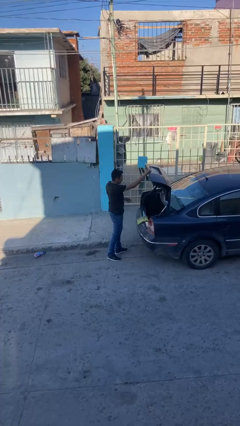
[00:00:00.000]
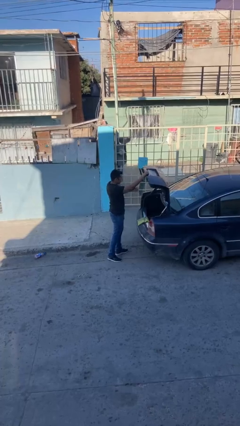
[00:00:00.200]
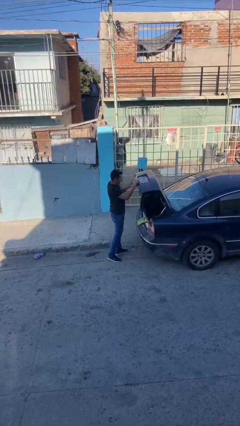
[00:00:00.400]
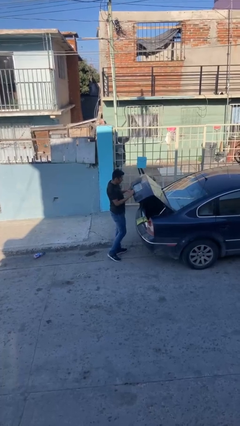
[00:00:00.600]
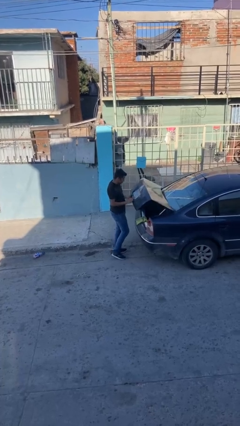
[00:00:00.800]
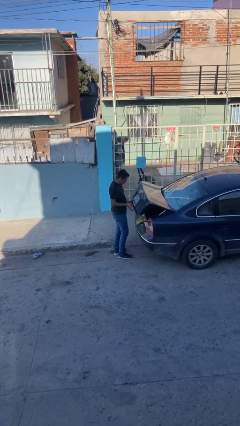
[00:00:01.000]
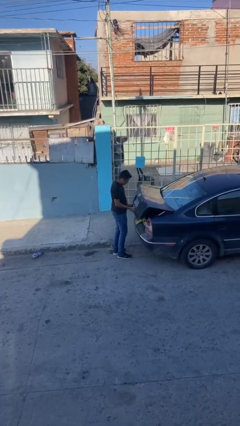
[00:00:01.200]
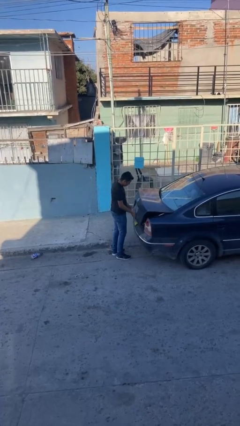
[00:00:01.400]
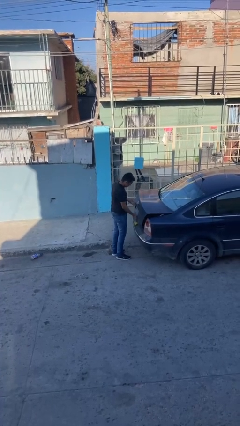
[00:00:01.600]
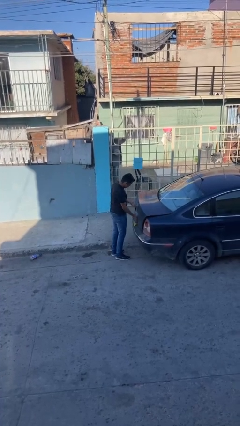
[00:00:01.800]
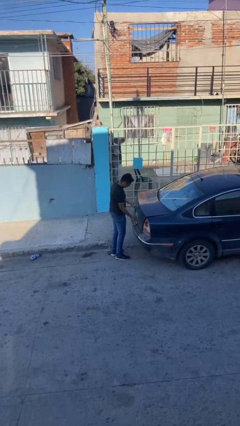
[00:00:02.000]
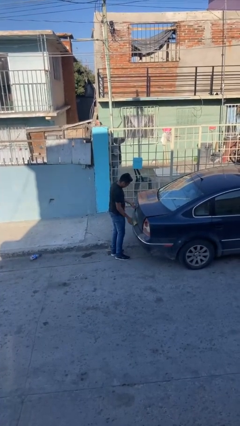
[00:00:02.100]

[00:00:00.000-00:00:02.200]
person closes car trunk

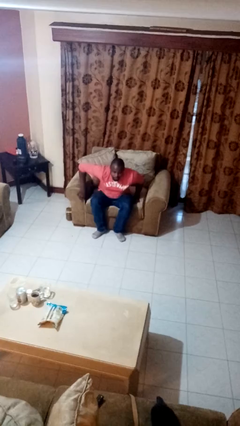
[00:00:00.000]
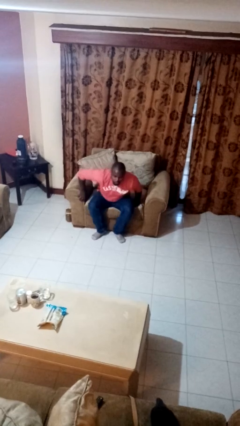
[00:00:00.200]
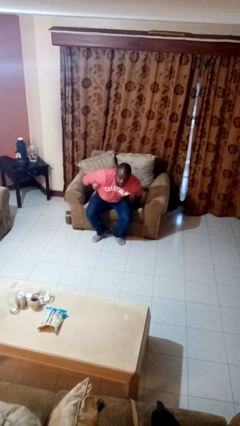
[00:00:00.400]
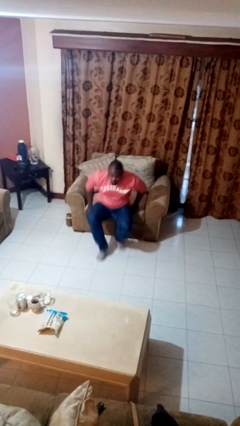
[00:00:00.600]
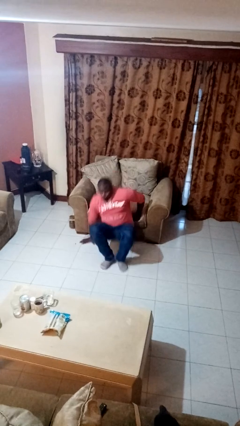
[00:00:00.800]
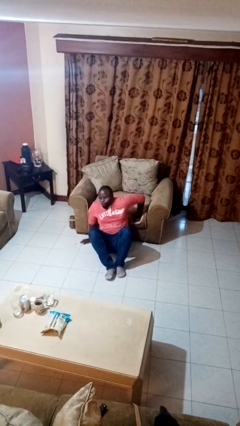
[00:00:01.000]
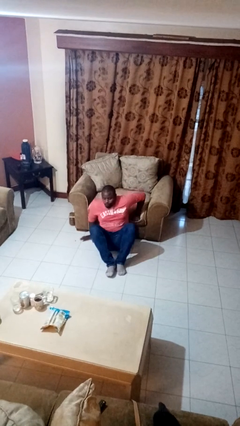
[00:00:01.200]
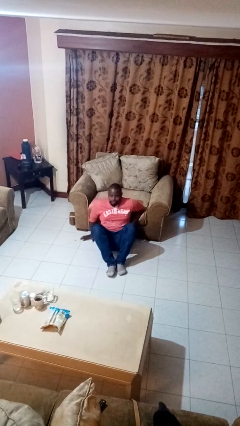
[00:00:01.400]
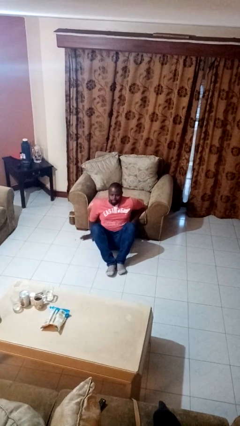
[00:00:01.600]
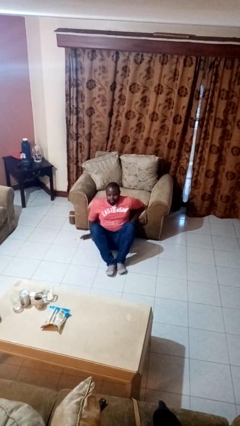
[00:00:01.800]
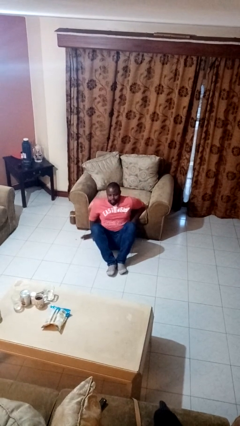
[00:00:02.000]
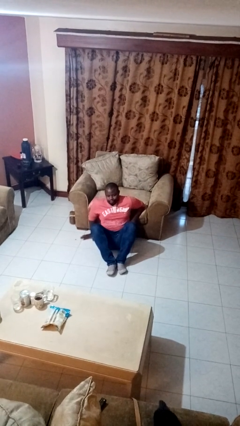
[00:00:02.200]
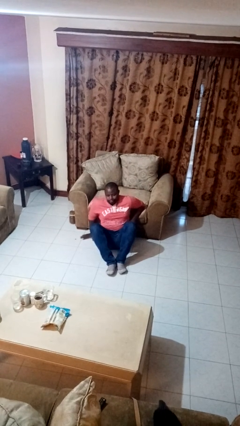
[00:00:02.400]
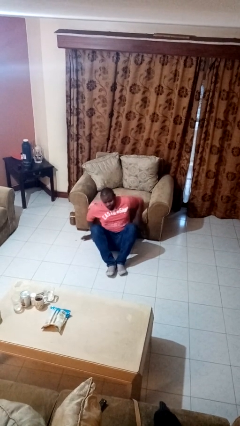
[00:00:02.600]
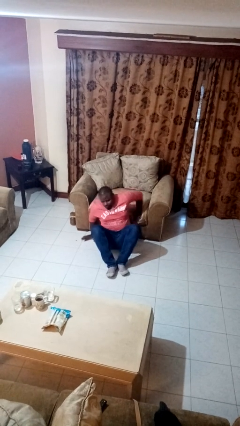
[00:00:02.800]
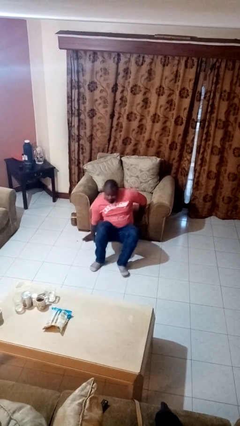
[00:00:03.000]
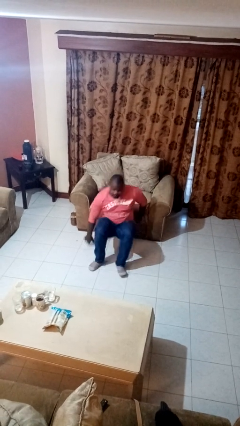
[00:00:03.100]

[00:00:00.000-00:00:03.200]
person falls from chair

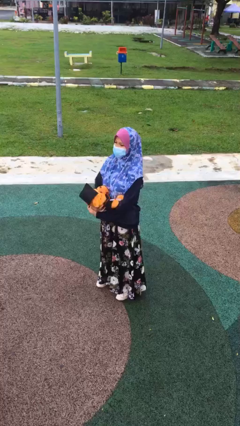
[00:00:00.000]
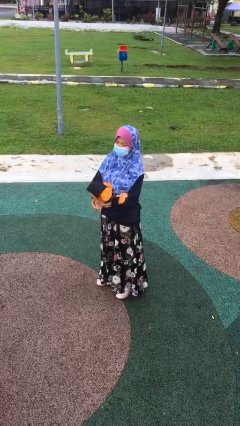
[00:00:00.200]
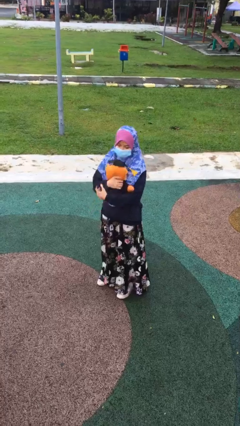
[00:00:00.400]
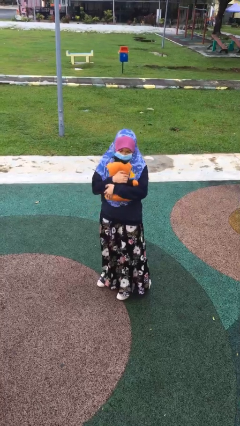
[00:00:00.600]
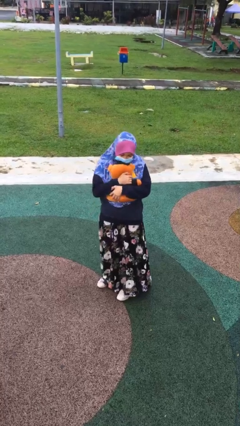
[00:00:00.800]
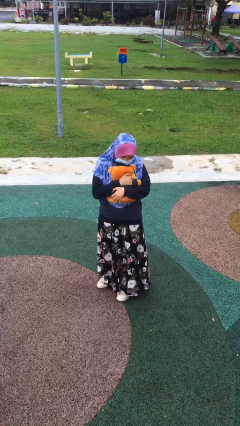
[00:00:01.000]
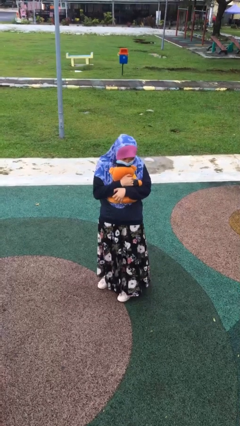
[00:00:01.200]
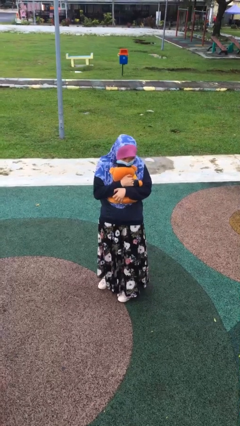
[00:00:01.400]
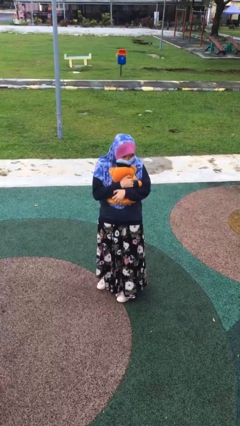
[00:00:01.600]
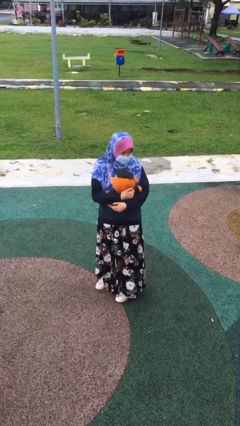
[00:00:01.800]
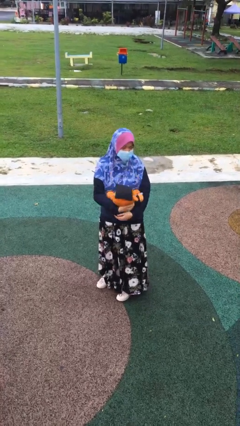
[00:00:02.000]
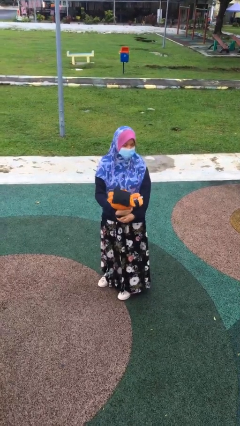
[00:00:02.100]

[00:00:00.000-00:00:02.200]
person hugs stuffed animal

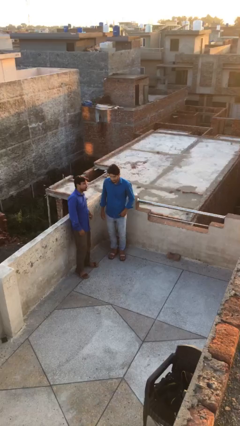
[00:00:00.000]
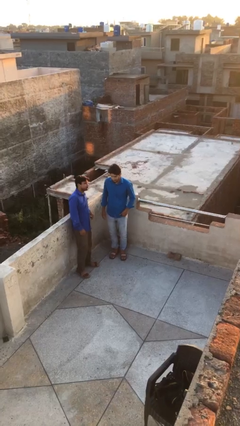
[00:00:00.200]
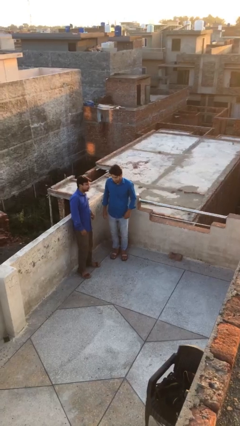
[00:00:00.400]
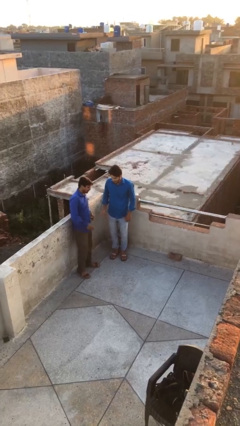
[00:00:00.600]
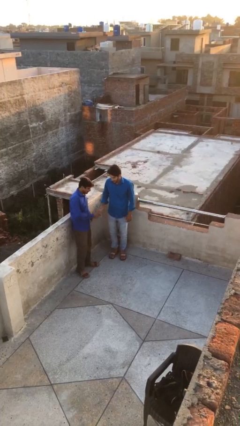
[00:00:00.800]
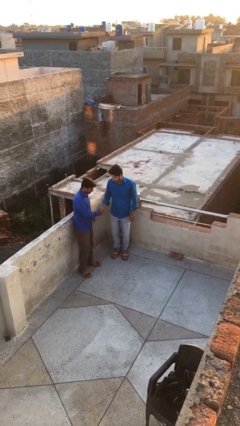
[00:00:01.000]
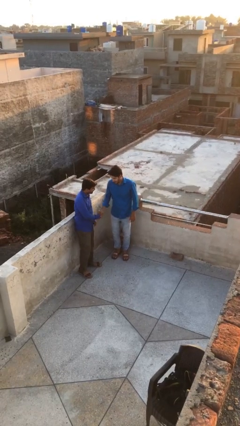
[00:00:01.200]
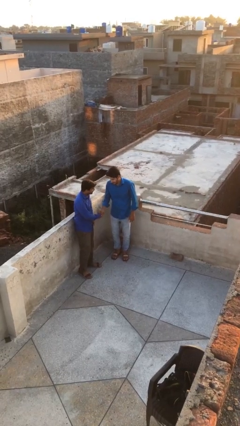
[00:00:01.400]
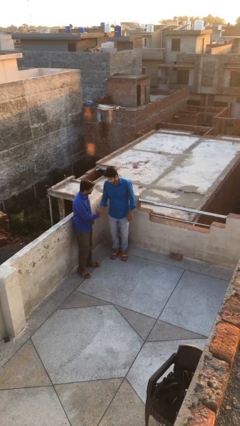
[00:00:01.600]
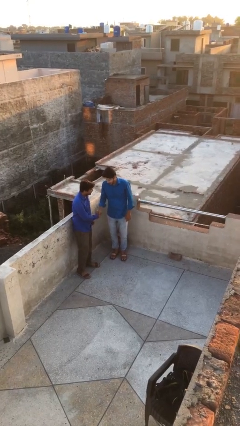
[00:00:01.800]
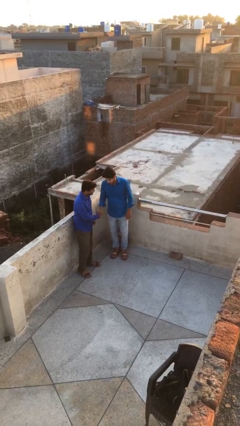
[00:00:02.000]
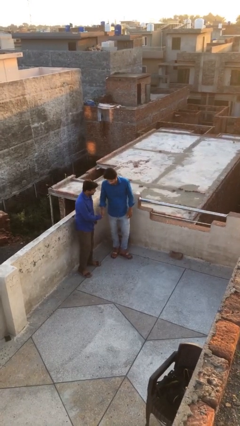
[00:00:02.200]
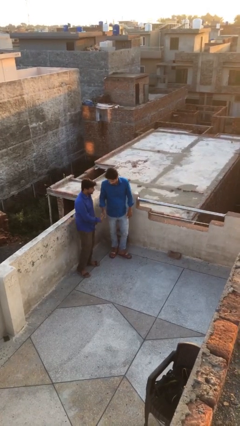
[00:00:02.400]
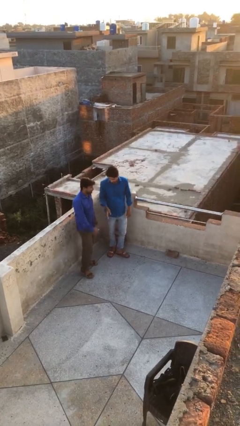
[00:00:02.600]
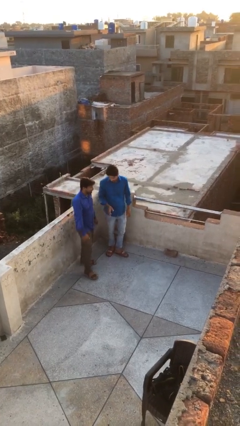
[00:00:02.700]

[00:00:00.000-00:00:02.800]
person shakes hand

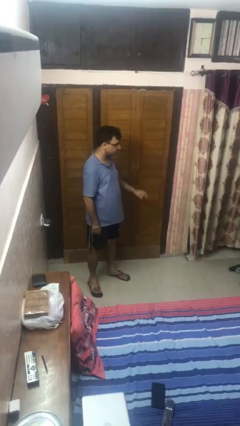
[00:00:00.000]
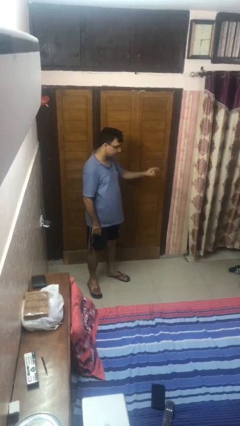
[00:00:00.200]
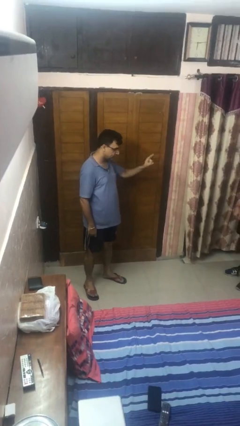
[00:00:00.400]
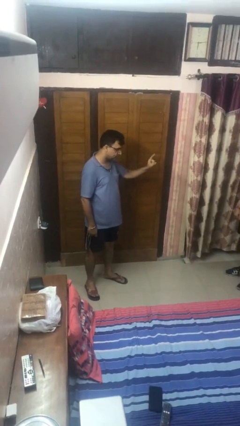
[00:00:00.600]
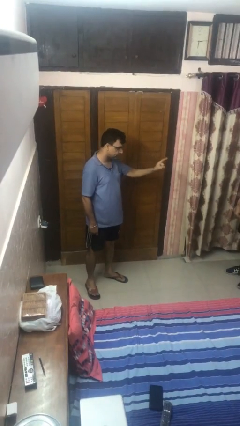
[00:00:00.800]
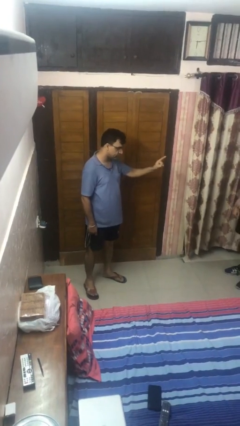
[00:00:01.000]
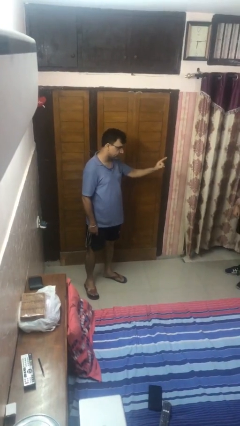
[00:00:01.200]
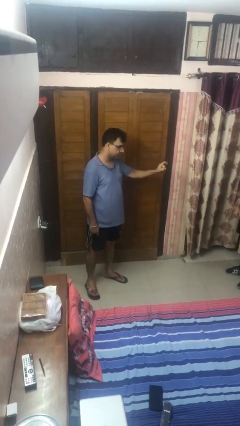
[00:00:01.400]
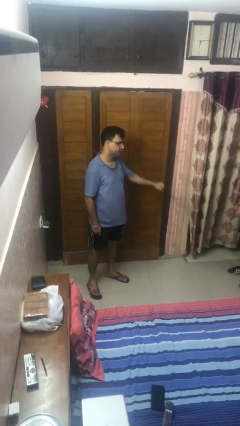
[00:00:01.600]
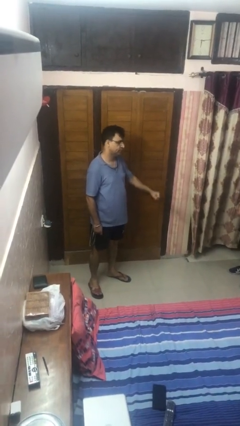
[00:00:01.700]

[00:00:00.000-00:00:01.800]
person points at person

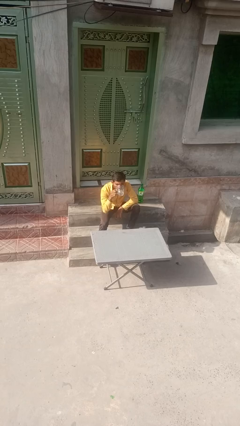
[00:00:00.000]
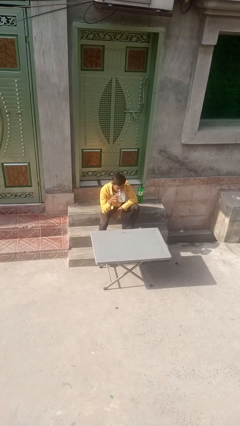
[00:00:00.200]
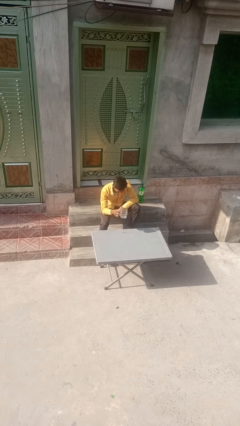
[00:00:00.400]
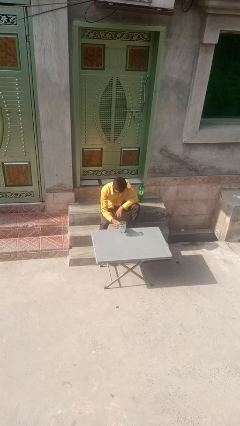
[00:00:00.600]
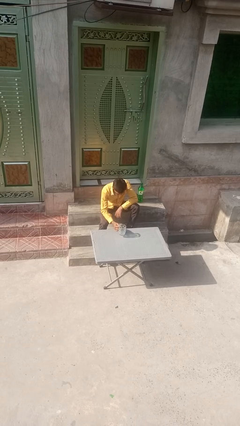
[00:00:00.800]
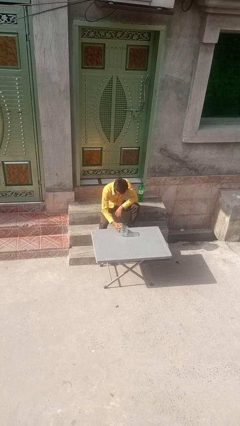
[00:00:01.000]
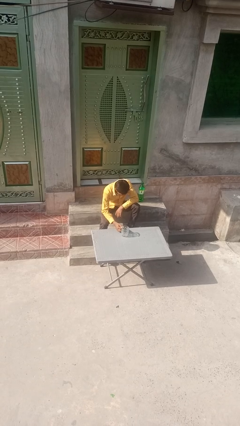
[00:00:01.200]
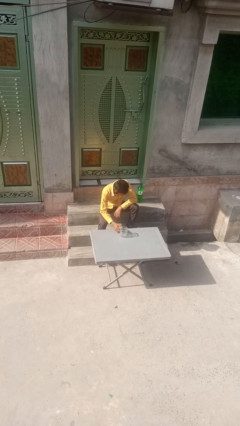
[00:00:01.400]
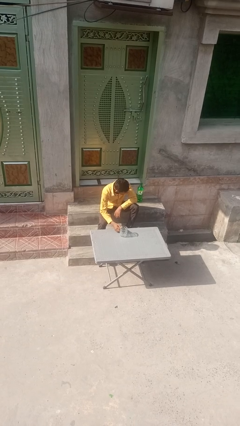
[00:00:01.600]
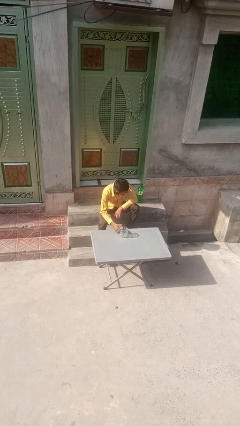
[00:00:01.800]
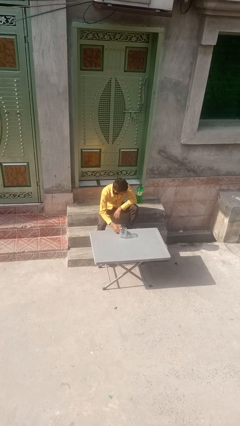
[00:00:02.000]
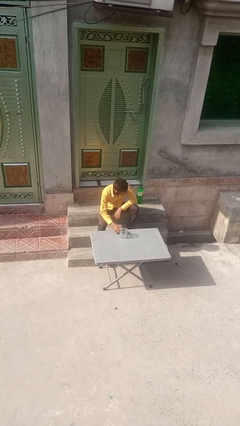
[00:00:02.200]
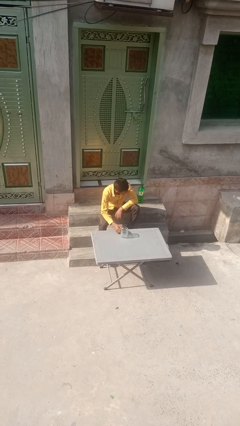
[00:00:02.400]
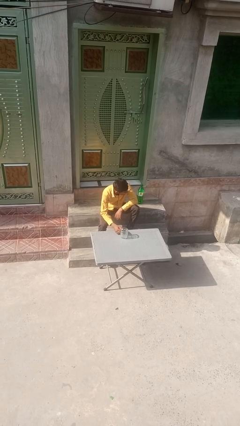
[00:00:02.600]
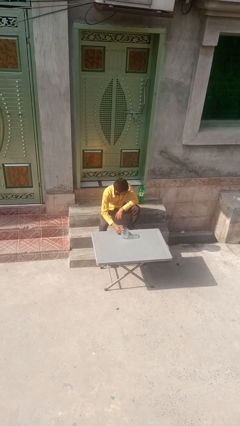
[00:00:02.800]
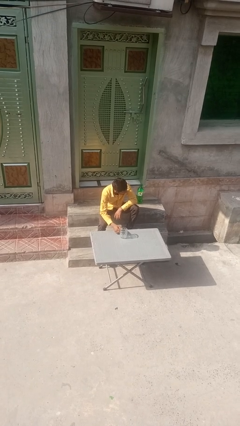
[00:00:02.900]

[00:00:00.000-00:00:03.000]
person puts down object on table

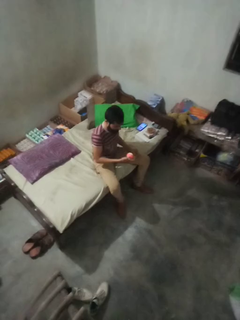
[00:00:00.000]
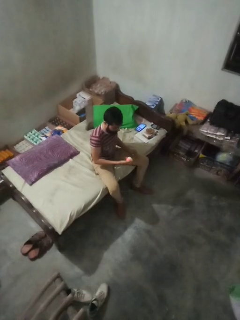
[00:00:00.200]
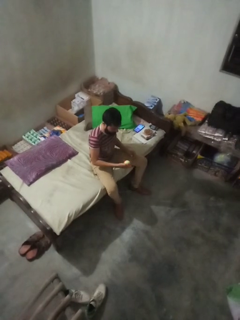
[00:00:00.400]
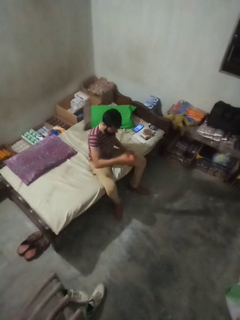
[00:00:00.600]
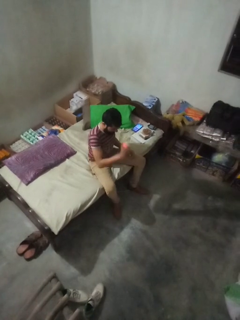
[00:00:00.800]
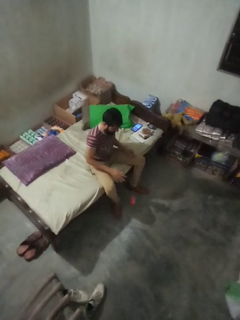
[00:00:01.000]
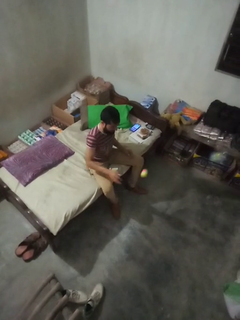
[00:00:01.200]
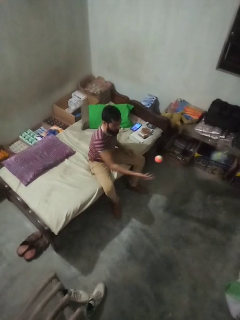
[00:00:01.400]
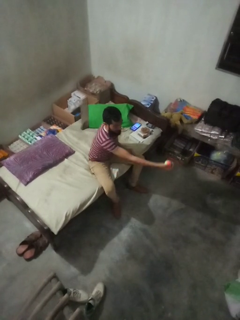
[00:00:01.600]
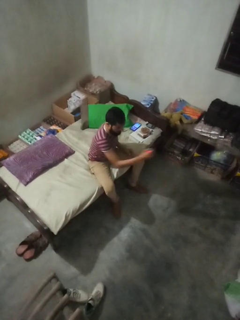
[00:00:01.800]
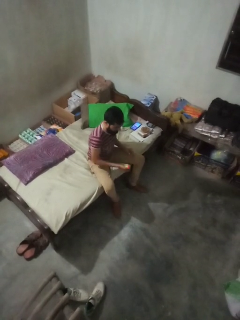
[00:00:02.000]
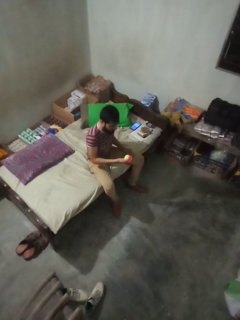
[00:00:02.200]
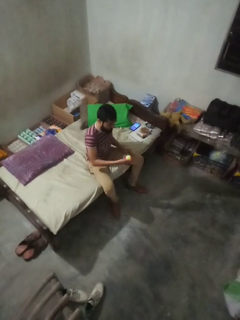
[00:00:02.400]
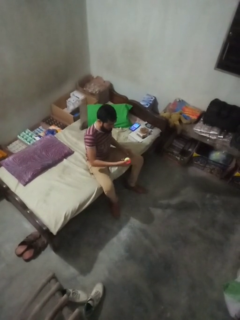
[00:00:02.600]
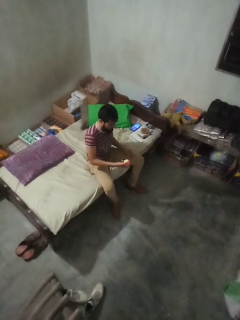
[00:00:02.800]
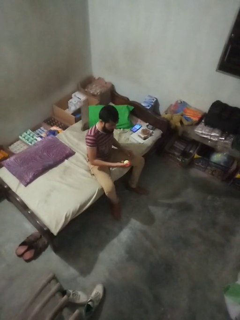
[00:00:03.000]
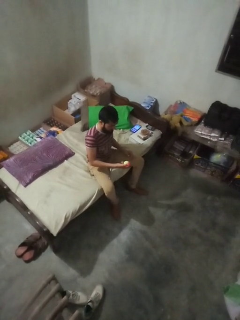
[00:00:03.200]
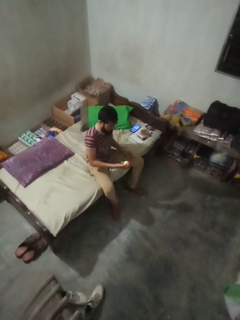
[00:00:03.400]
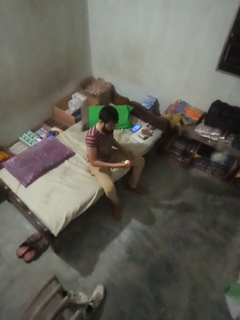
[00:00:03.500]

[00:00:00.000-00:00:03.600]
person bounces ball on floor
